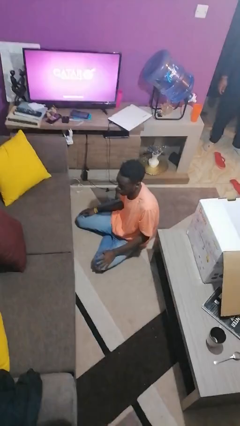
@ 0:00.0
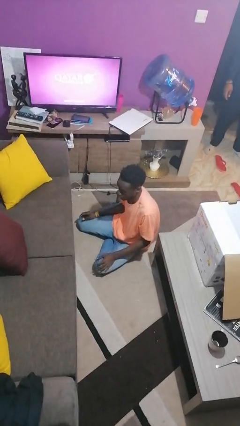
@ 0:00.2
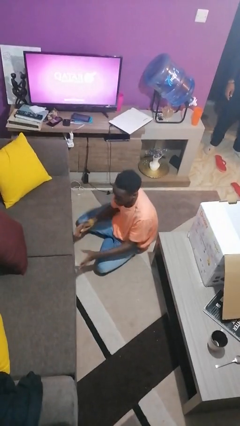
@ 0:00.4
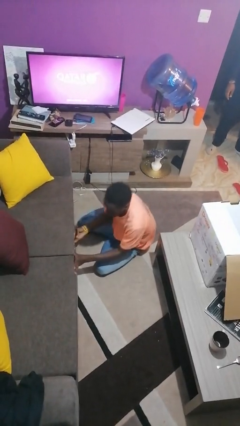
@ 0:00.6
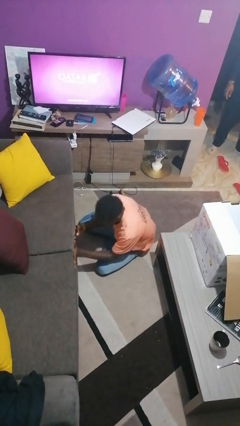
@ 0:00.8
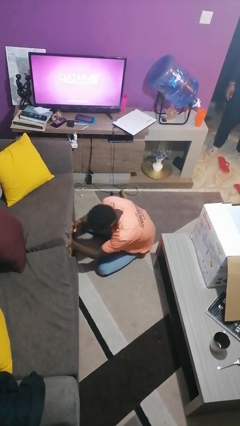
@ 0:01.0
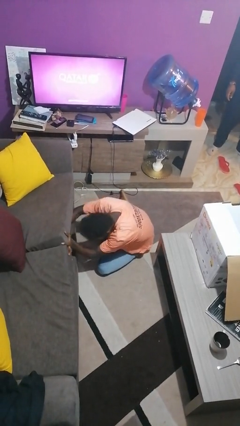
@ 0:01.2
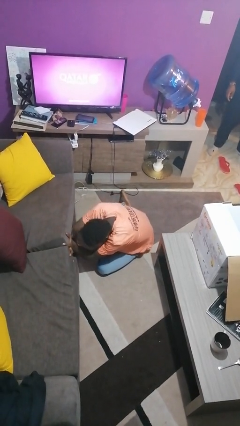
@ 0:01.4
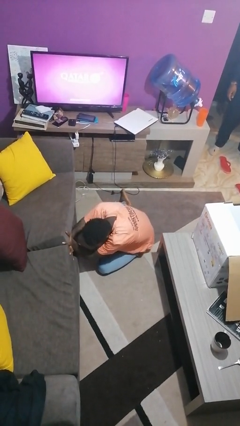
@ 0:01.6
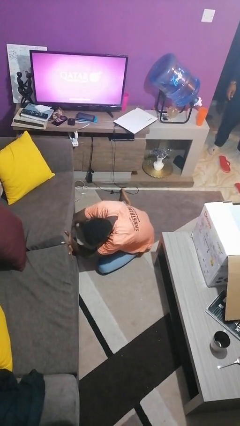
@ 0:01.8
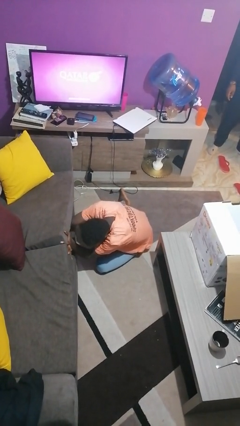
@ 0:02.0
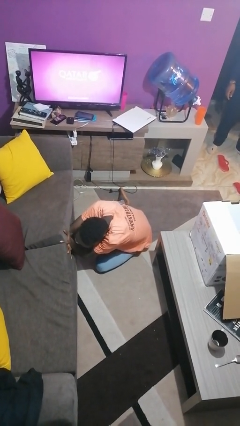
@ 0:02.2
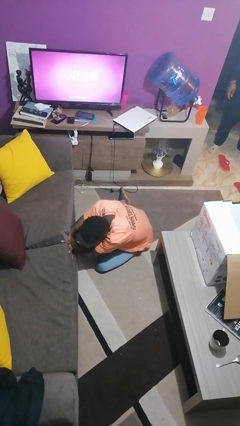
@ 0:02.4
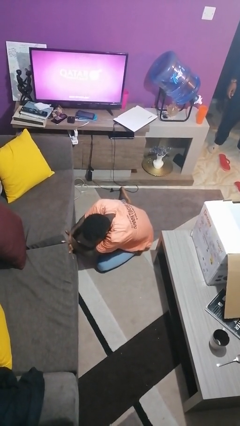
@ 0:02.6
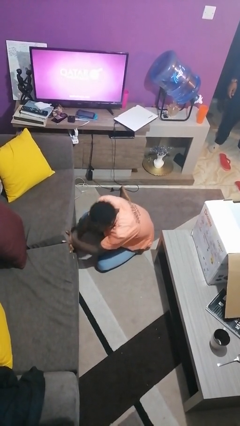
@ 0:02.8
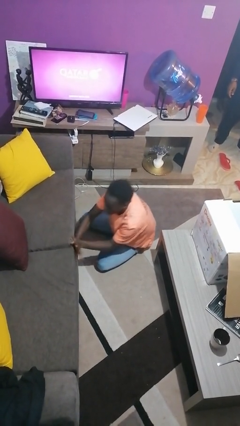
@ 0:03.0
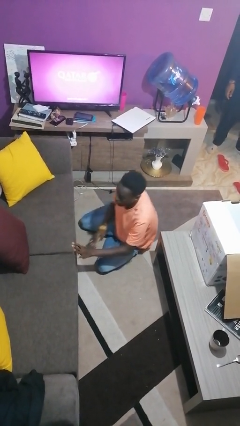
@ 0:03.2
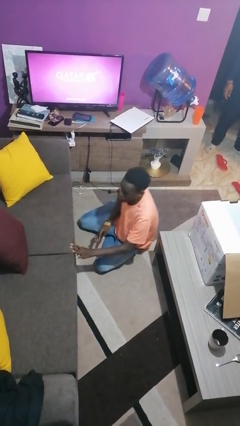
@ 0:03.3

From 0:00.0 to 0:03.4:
person searches under couch

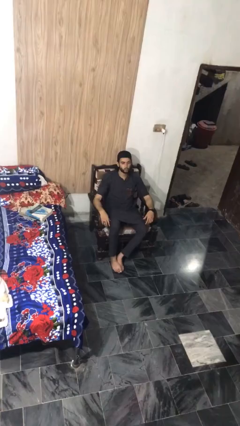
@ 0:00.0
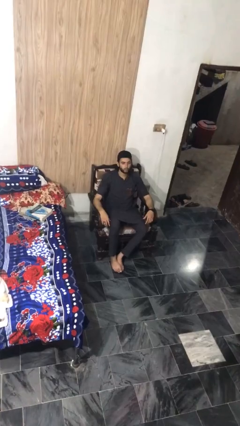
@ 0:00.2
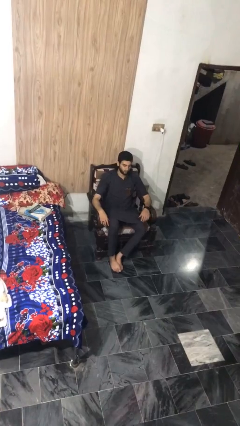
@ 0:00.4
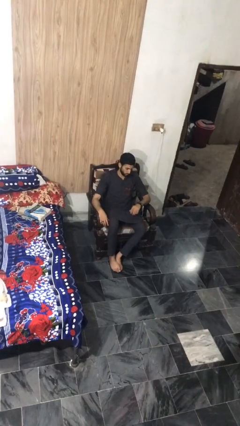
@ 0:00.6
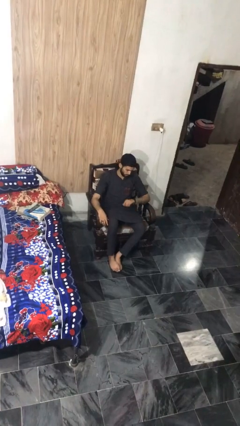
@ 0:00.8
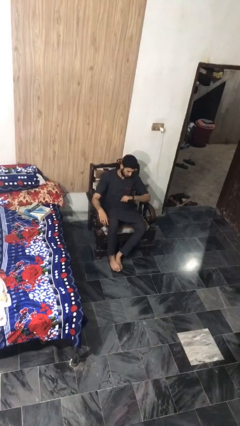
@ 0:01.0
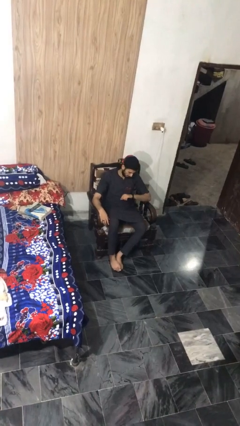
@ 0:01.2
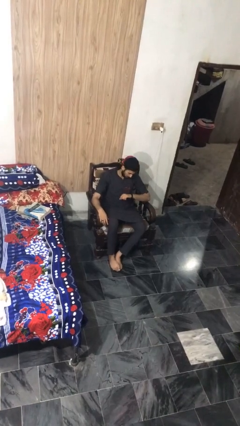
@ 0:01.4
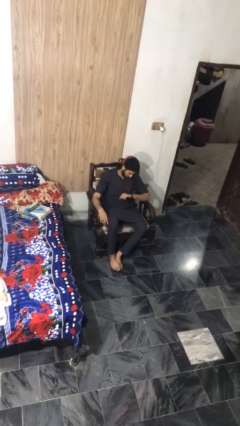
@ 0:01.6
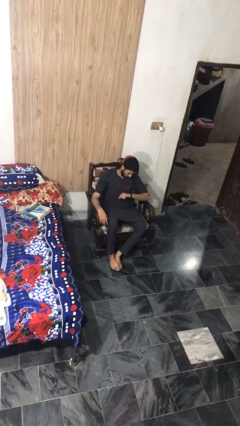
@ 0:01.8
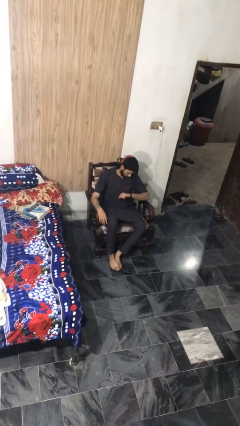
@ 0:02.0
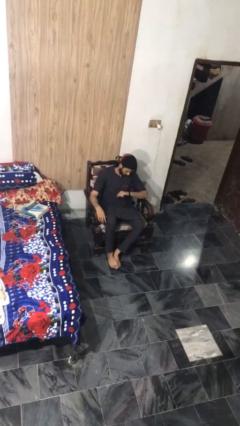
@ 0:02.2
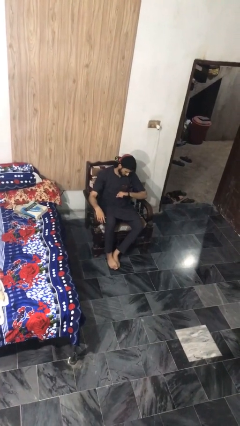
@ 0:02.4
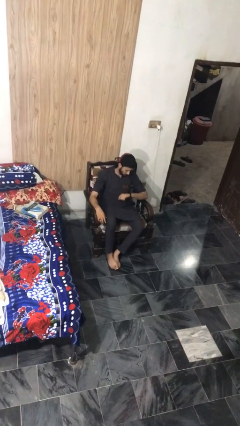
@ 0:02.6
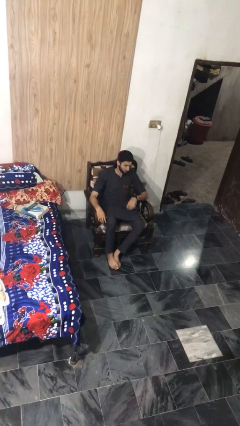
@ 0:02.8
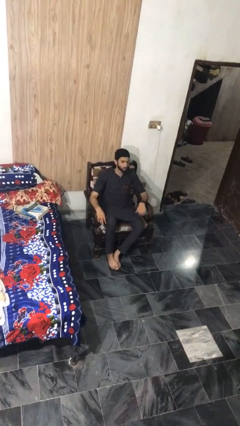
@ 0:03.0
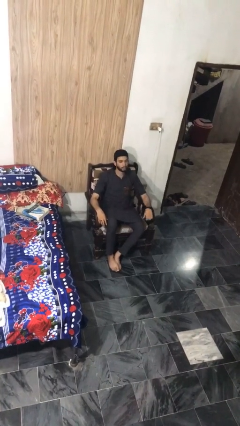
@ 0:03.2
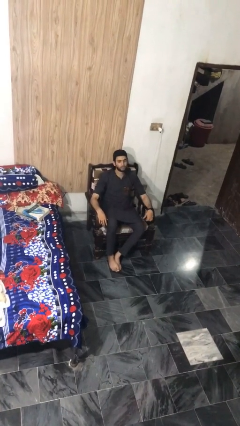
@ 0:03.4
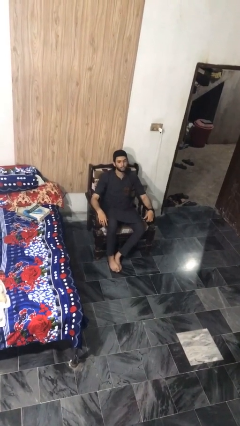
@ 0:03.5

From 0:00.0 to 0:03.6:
person looks at wristwatch

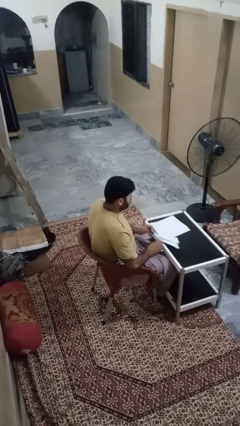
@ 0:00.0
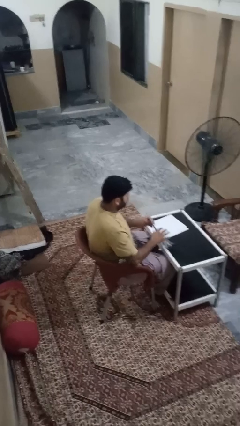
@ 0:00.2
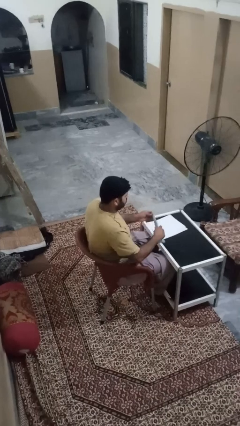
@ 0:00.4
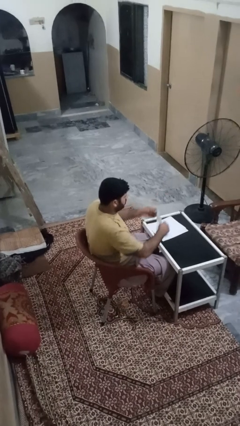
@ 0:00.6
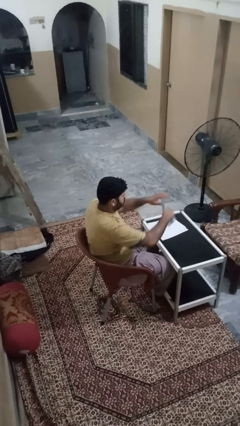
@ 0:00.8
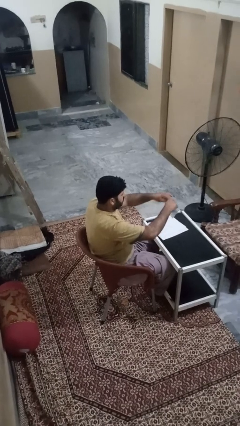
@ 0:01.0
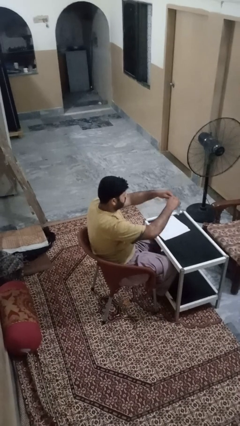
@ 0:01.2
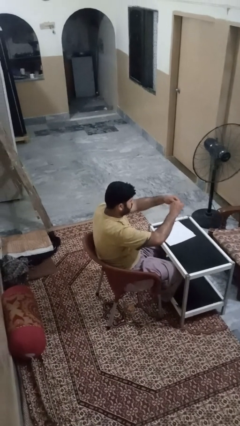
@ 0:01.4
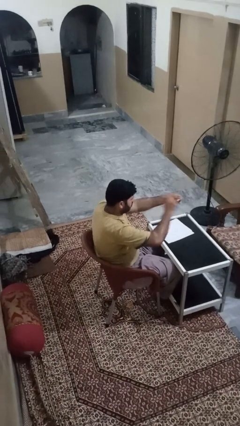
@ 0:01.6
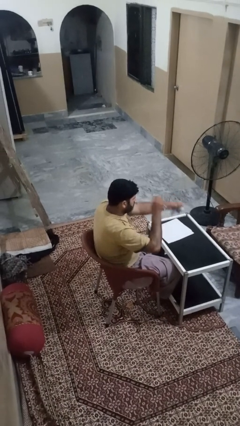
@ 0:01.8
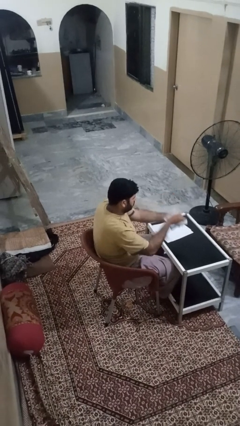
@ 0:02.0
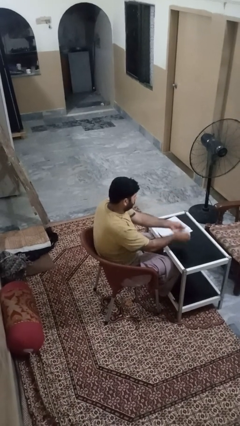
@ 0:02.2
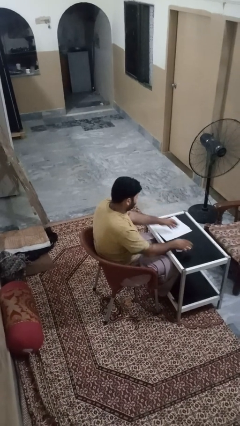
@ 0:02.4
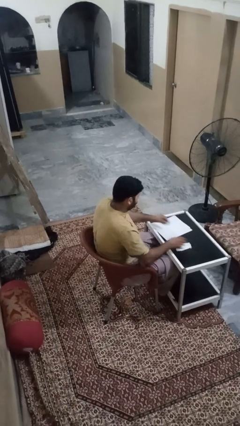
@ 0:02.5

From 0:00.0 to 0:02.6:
person tears paper

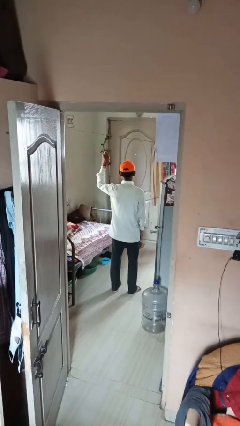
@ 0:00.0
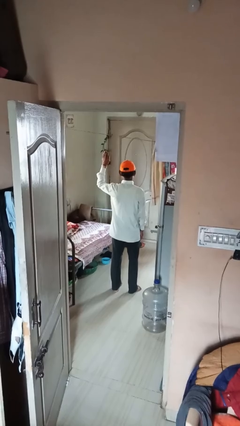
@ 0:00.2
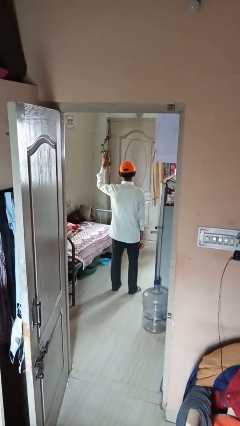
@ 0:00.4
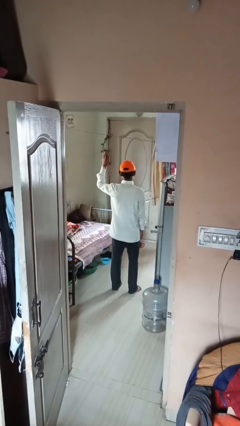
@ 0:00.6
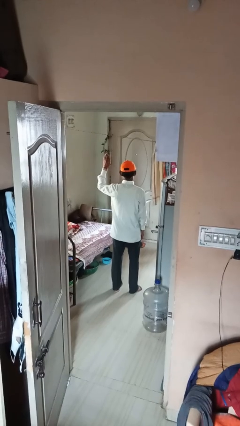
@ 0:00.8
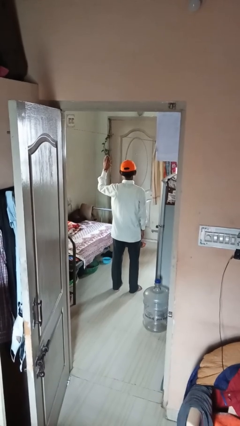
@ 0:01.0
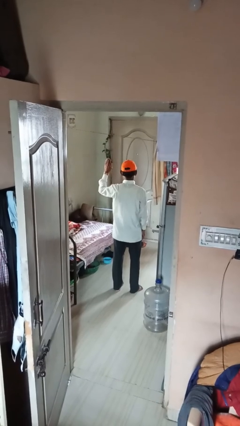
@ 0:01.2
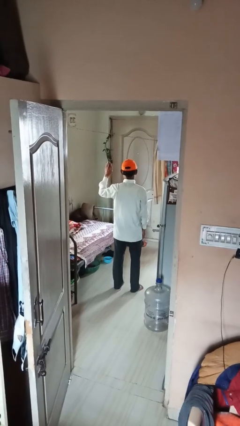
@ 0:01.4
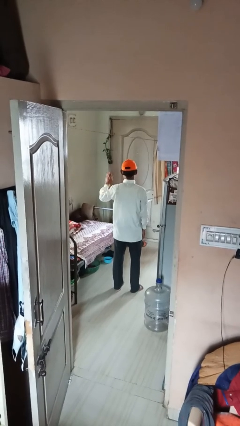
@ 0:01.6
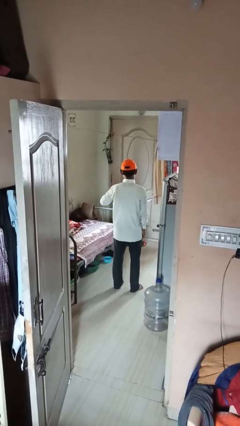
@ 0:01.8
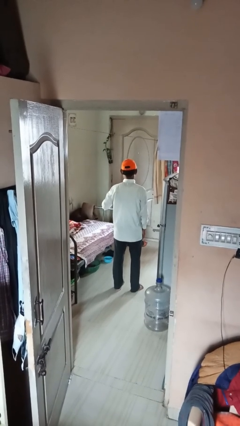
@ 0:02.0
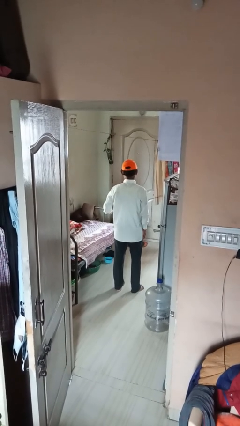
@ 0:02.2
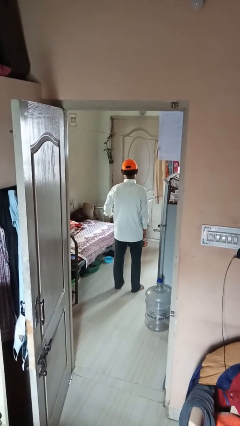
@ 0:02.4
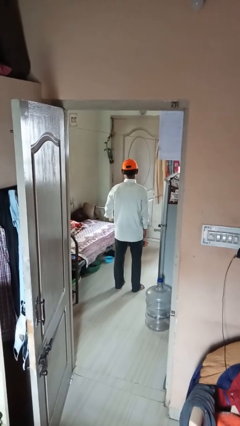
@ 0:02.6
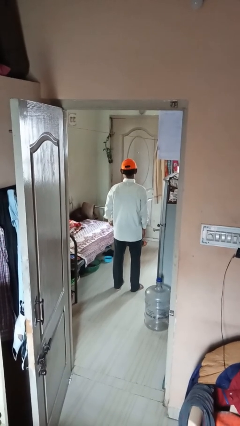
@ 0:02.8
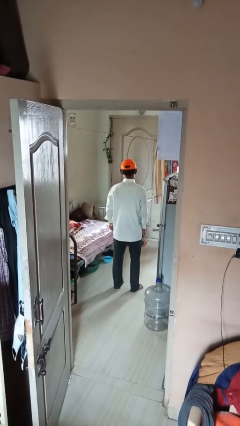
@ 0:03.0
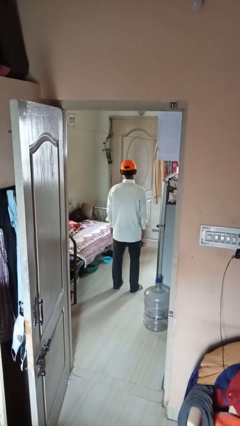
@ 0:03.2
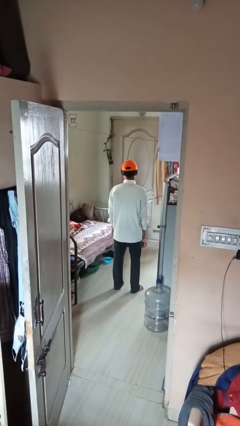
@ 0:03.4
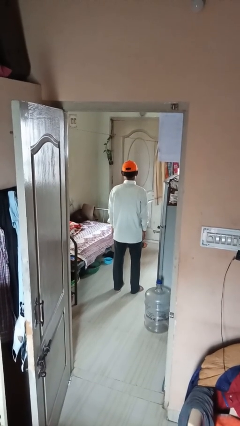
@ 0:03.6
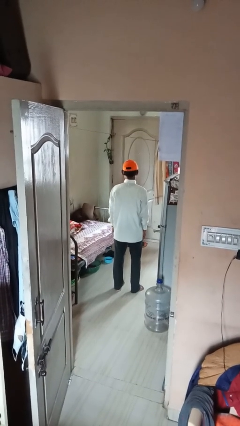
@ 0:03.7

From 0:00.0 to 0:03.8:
person gestures lower hand

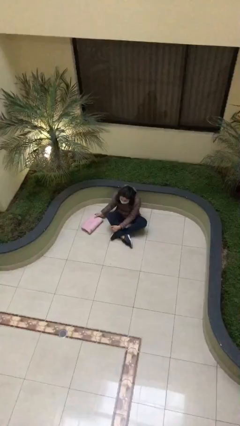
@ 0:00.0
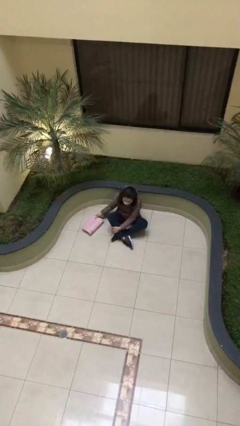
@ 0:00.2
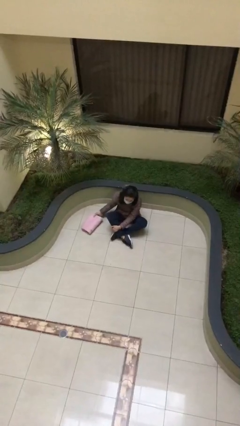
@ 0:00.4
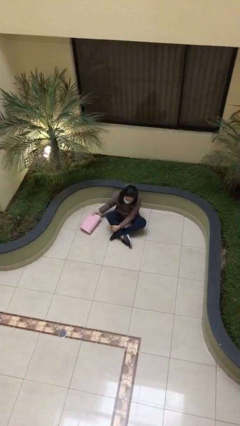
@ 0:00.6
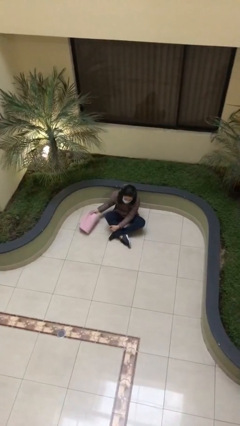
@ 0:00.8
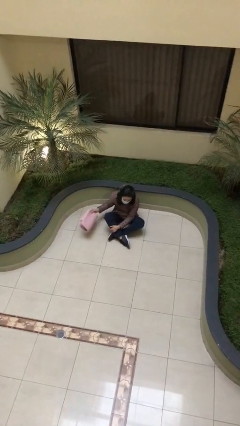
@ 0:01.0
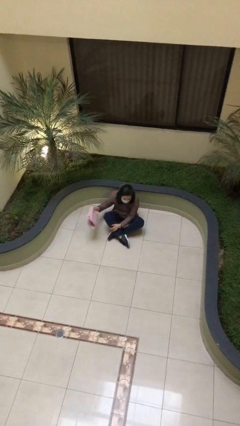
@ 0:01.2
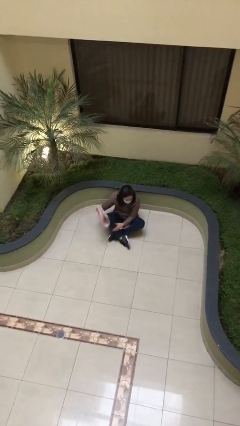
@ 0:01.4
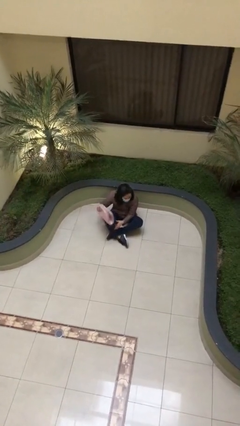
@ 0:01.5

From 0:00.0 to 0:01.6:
person picks up object from floor

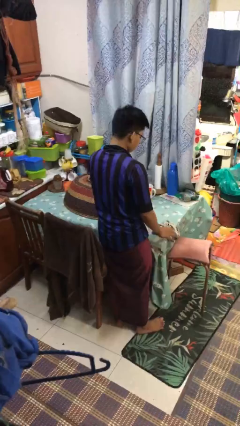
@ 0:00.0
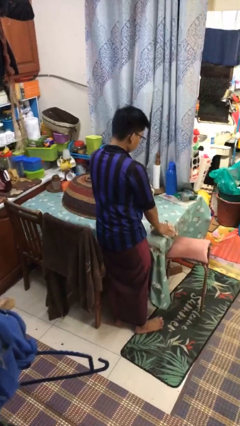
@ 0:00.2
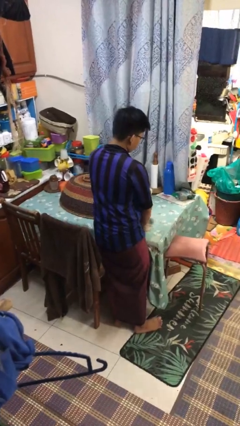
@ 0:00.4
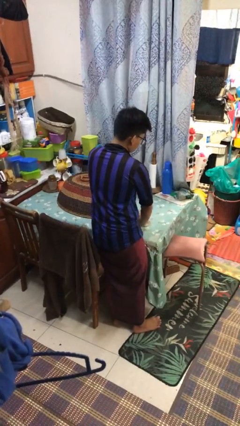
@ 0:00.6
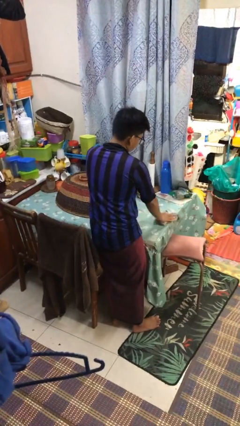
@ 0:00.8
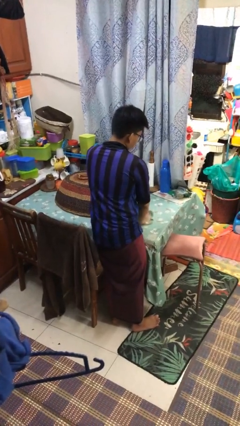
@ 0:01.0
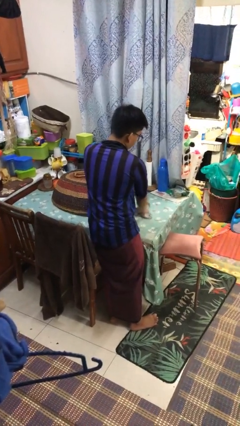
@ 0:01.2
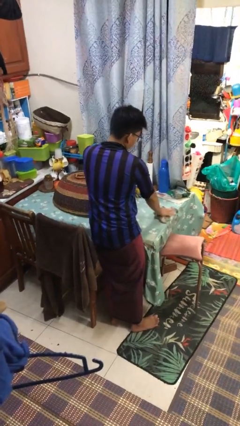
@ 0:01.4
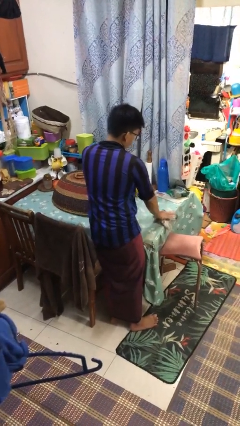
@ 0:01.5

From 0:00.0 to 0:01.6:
person cleans table with rag

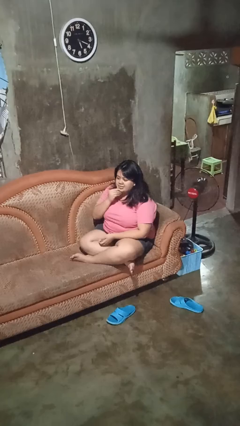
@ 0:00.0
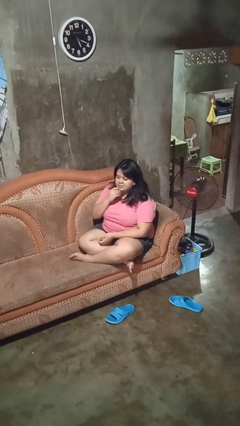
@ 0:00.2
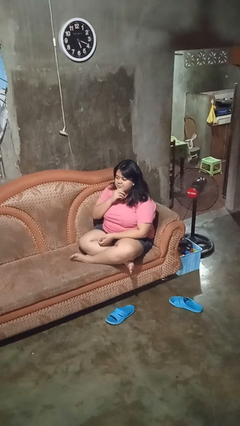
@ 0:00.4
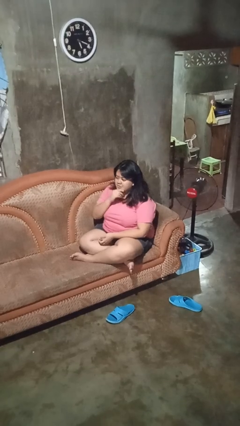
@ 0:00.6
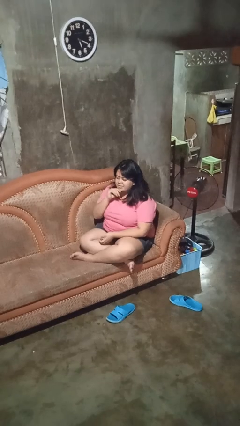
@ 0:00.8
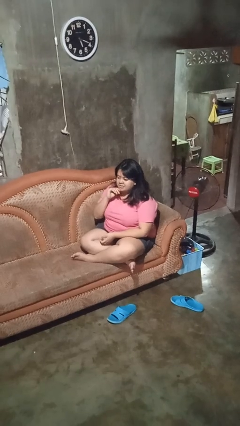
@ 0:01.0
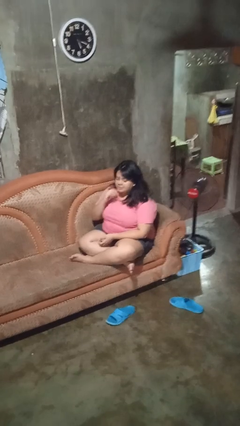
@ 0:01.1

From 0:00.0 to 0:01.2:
person strokes chin
